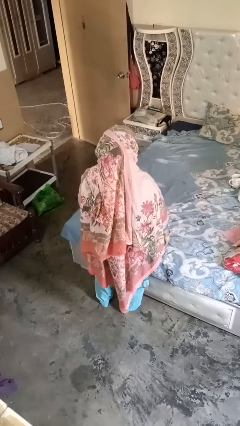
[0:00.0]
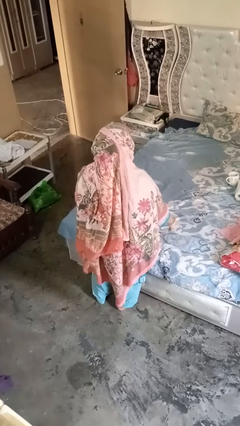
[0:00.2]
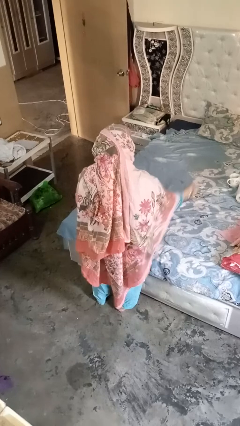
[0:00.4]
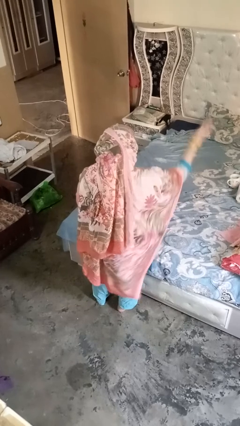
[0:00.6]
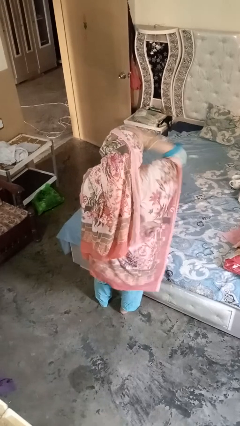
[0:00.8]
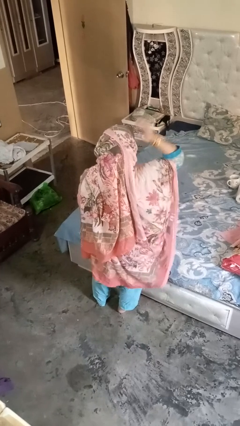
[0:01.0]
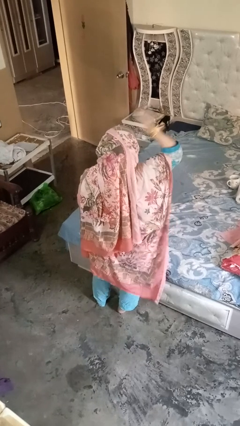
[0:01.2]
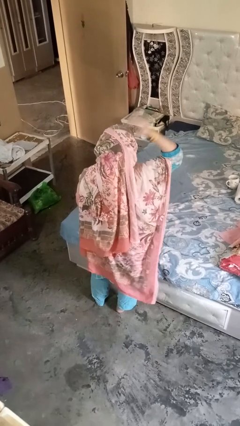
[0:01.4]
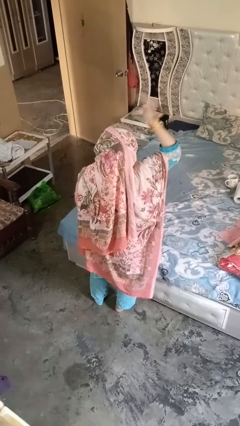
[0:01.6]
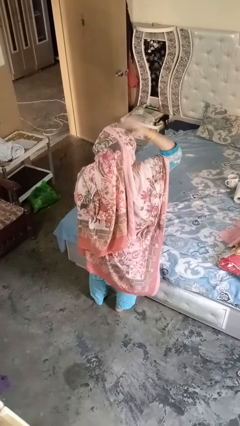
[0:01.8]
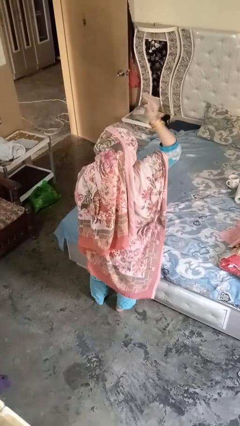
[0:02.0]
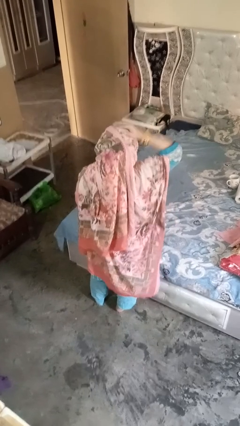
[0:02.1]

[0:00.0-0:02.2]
person pats head

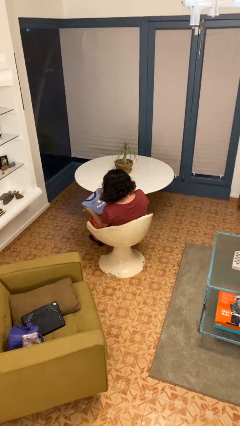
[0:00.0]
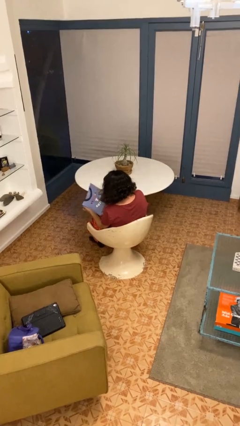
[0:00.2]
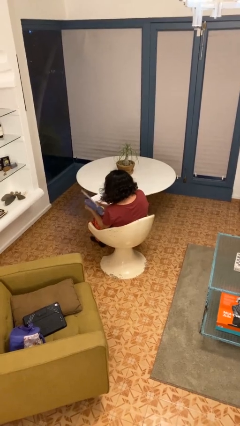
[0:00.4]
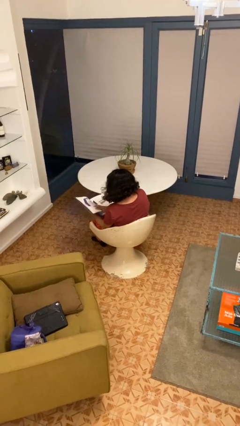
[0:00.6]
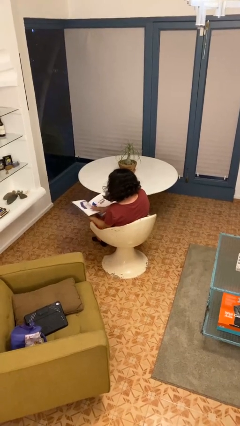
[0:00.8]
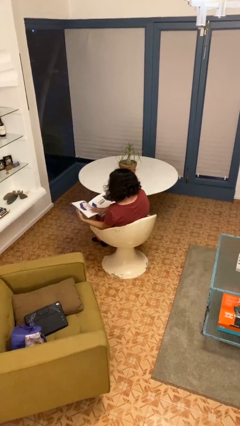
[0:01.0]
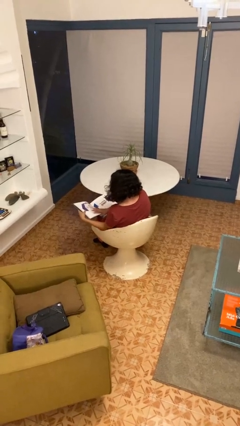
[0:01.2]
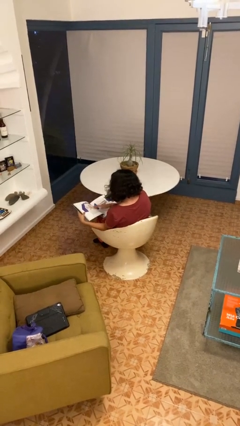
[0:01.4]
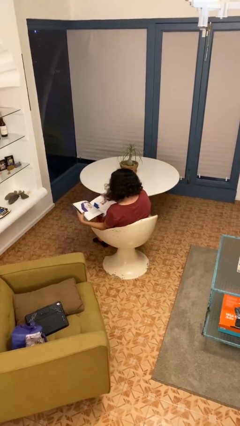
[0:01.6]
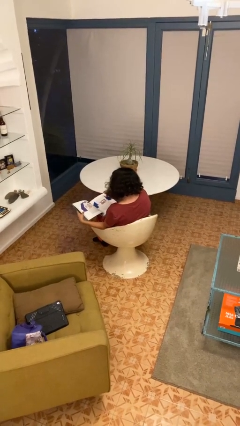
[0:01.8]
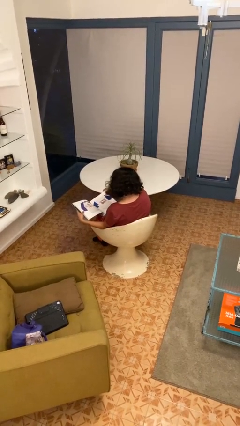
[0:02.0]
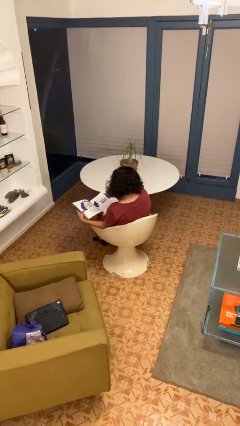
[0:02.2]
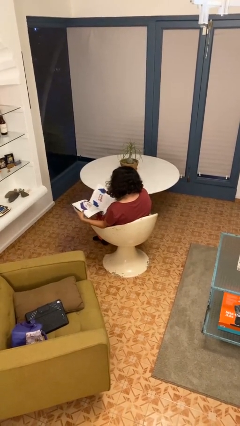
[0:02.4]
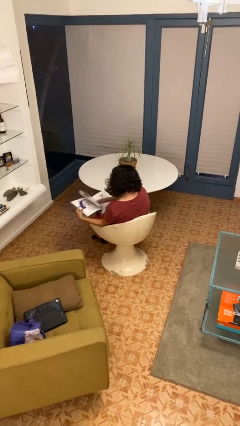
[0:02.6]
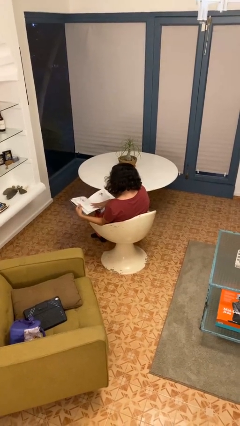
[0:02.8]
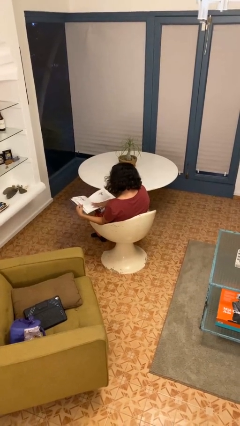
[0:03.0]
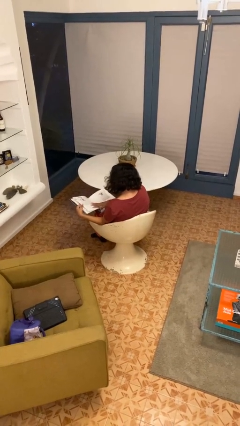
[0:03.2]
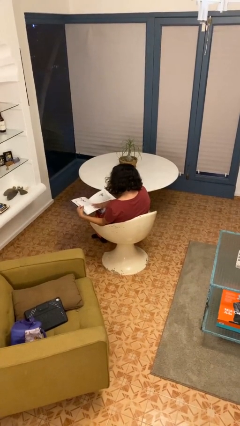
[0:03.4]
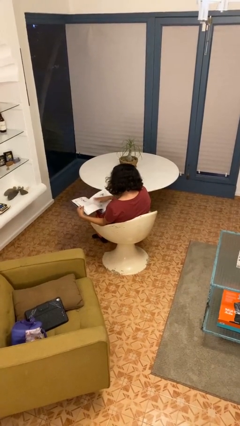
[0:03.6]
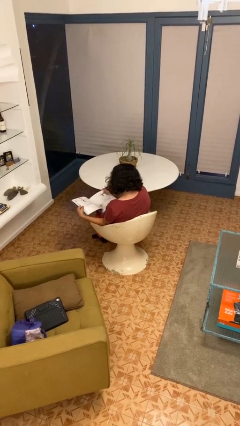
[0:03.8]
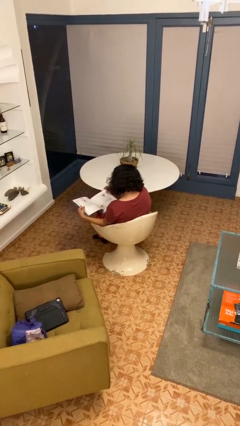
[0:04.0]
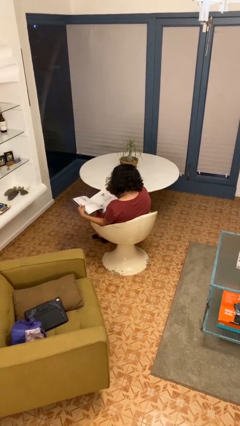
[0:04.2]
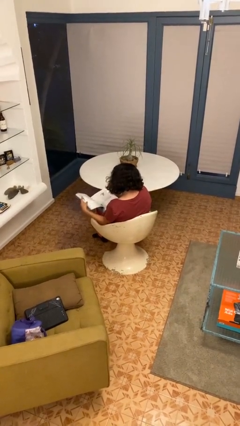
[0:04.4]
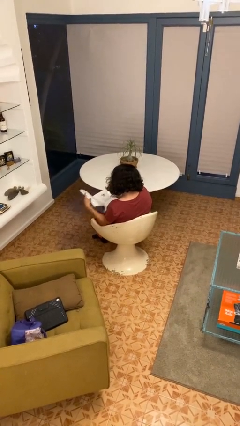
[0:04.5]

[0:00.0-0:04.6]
person reads book

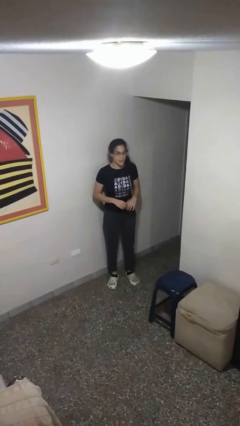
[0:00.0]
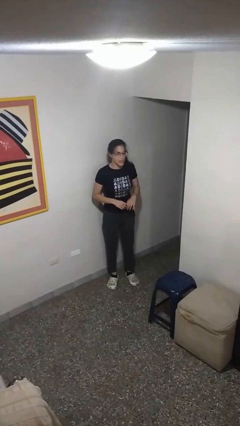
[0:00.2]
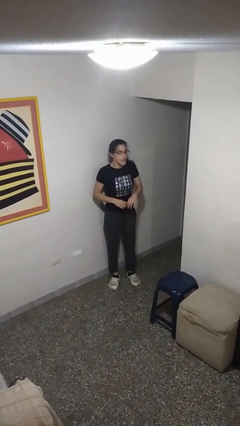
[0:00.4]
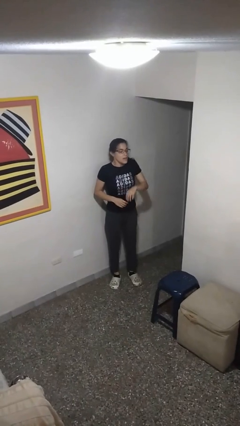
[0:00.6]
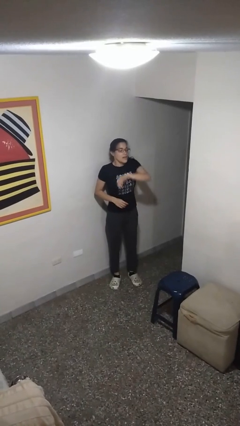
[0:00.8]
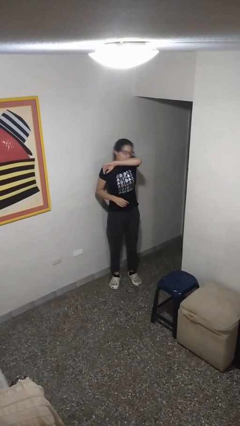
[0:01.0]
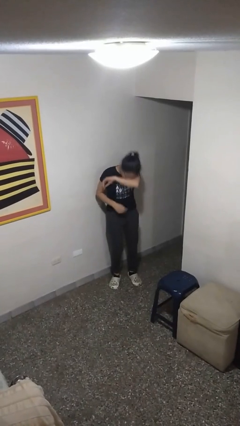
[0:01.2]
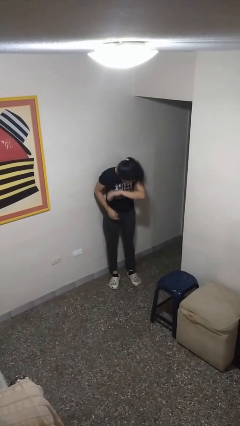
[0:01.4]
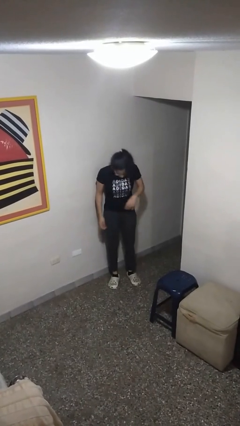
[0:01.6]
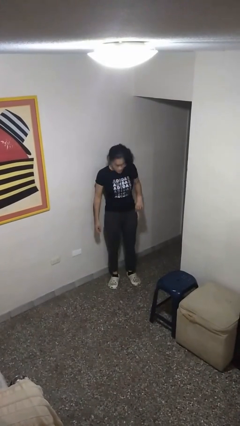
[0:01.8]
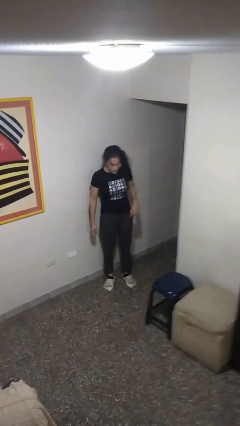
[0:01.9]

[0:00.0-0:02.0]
person sneezes into arm

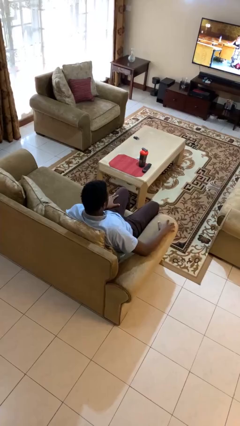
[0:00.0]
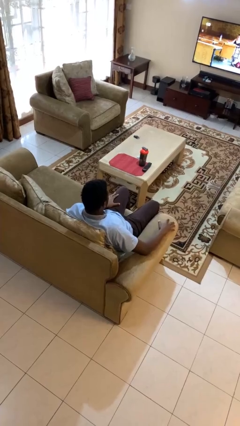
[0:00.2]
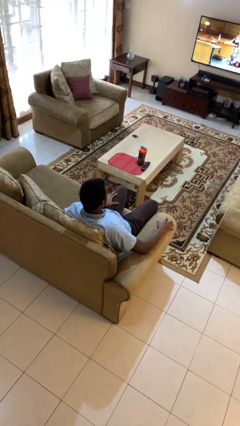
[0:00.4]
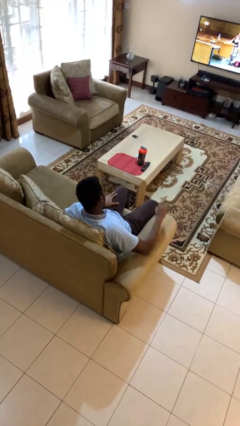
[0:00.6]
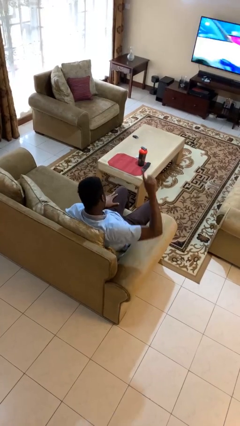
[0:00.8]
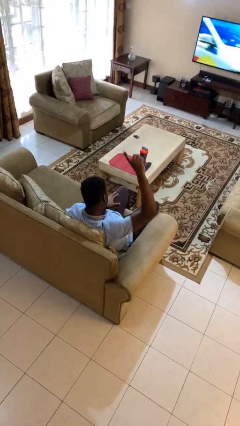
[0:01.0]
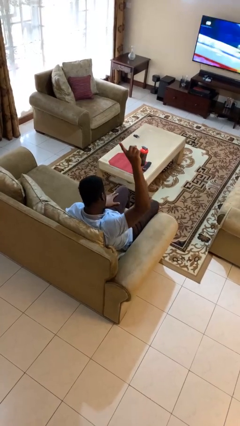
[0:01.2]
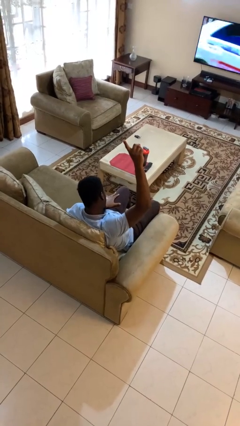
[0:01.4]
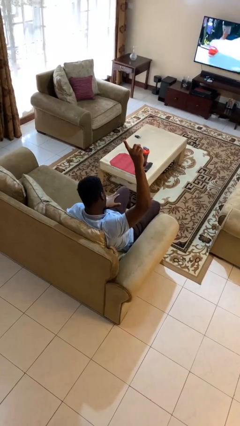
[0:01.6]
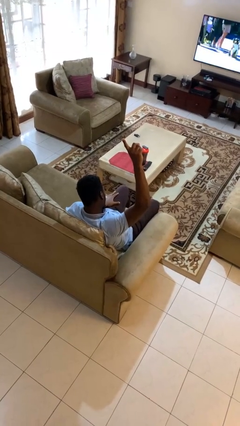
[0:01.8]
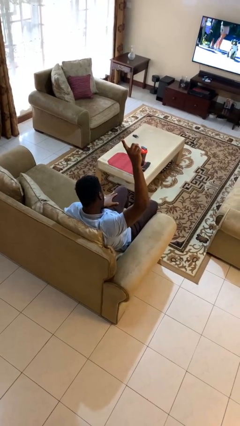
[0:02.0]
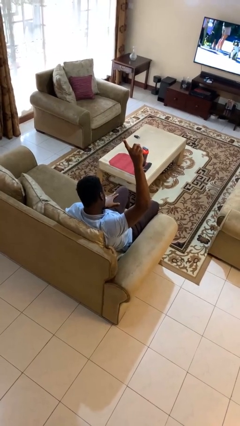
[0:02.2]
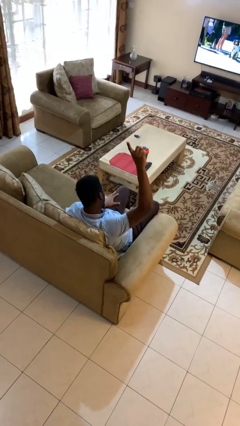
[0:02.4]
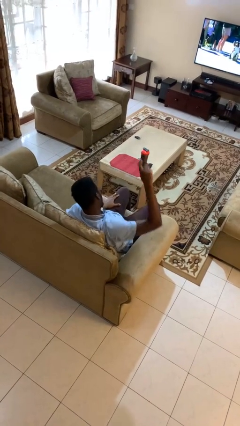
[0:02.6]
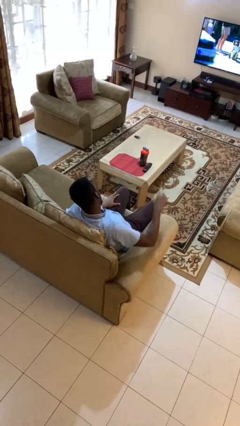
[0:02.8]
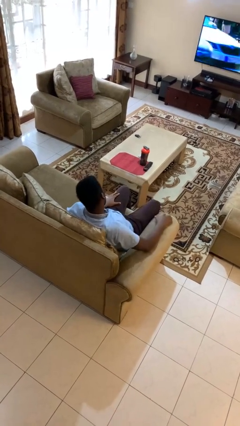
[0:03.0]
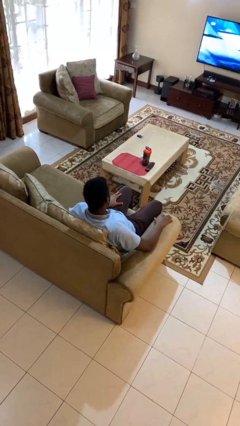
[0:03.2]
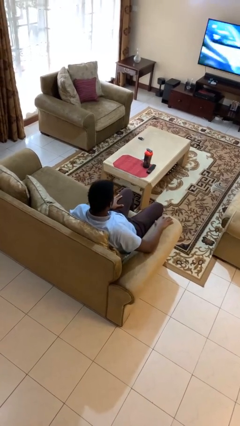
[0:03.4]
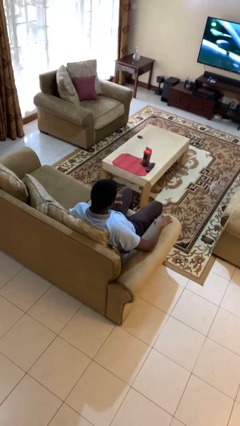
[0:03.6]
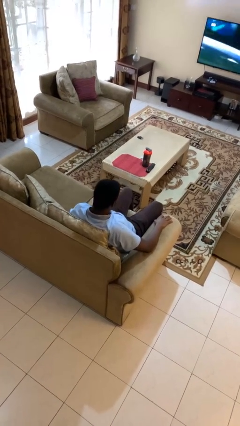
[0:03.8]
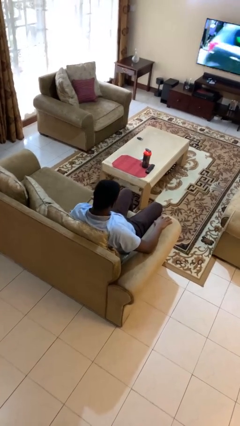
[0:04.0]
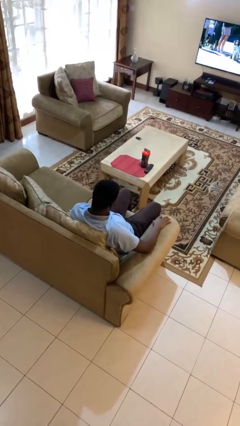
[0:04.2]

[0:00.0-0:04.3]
person gestures number one

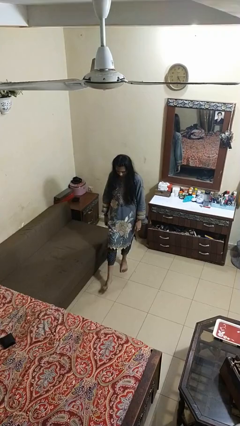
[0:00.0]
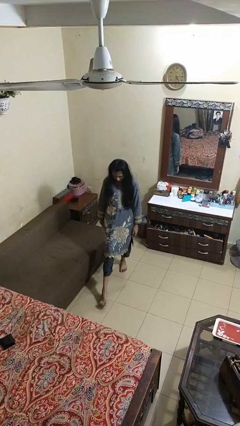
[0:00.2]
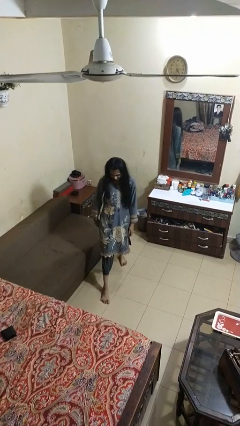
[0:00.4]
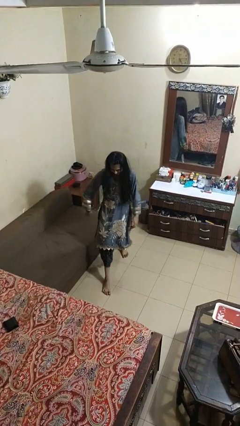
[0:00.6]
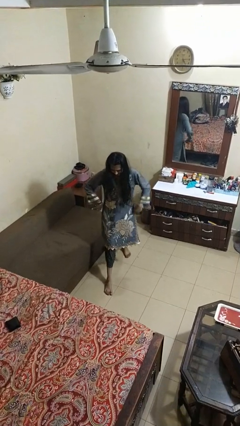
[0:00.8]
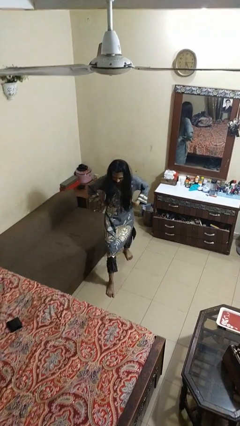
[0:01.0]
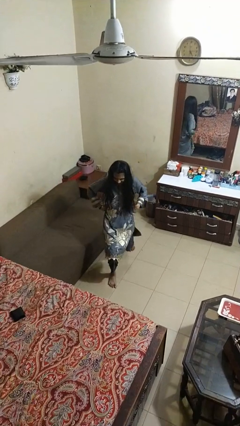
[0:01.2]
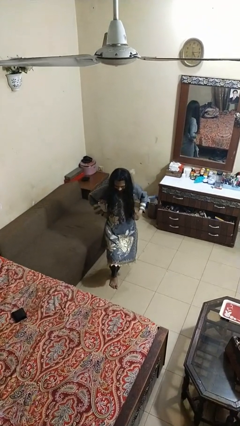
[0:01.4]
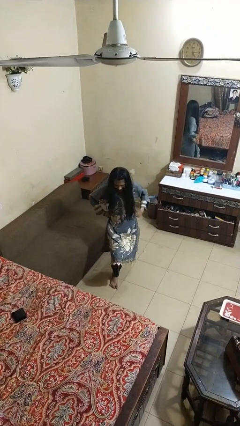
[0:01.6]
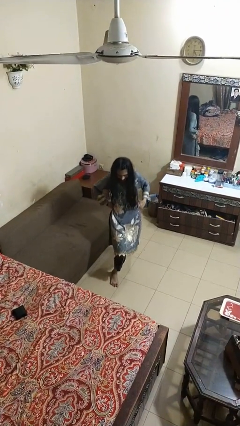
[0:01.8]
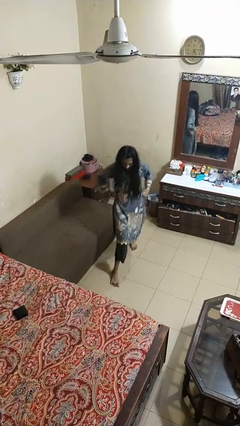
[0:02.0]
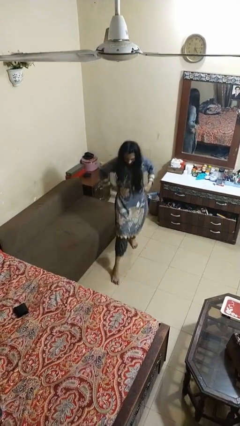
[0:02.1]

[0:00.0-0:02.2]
person exercises with lunges

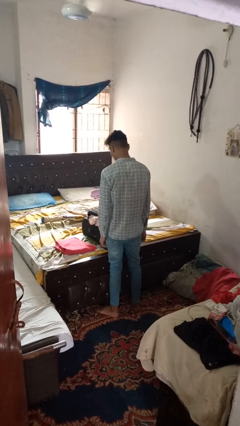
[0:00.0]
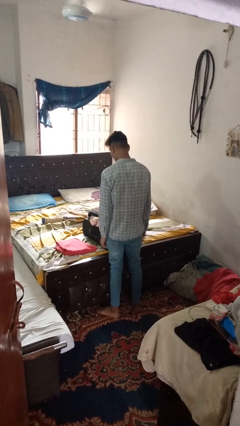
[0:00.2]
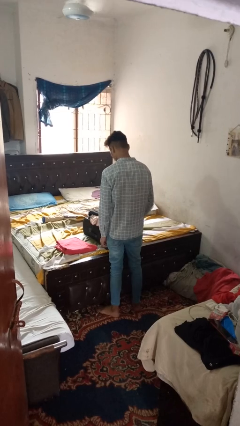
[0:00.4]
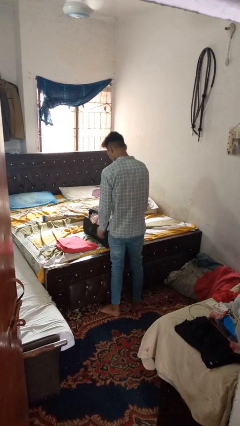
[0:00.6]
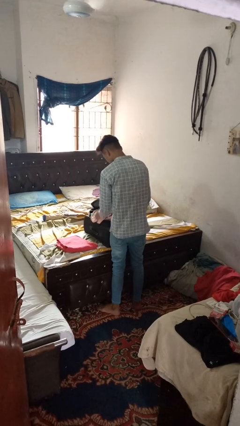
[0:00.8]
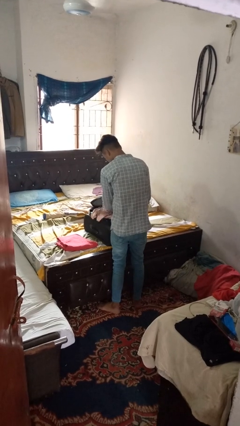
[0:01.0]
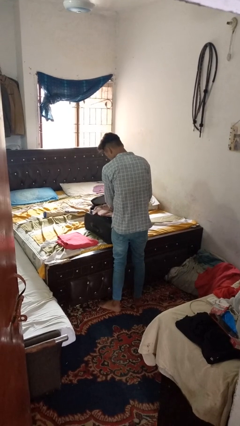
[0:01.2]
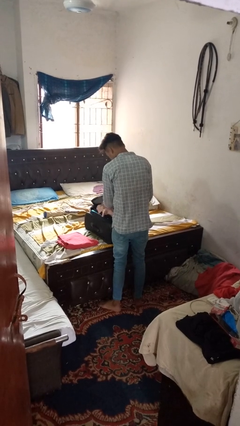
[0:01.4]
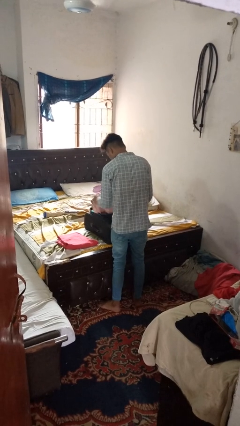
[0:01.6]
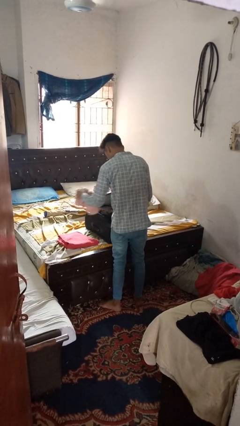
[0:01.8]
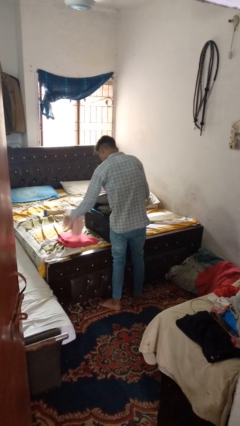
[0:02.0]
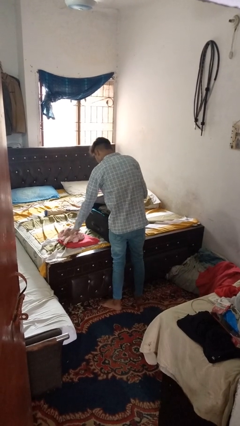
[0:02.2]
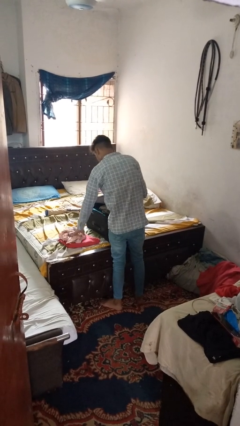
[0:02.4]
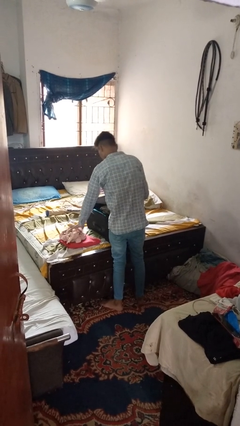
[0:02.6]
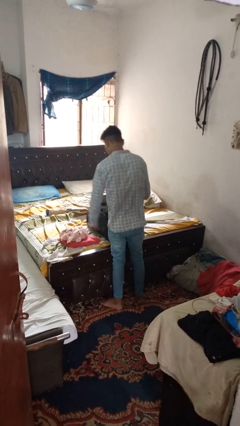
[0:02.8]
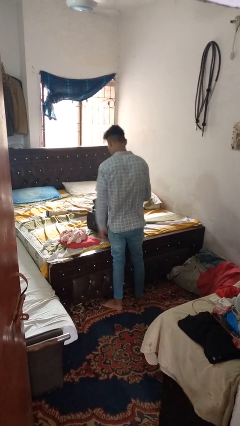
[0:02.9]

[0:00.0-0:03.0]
person unloads clothes from suitcase
